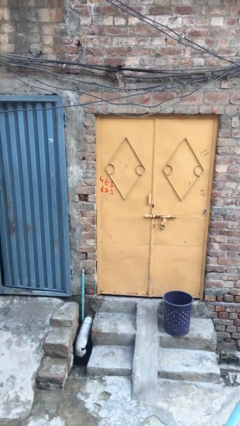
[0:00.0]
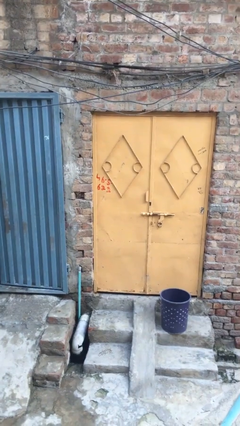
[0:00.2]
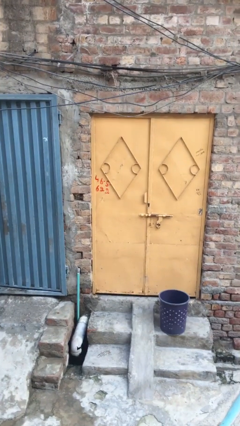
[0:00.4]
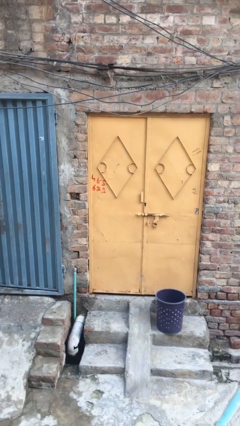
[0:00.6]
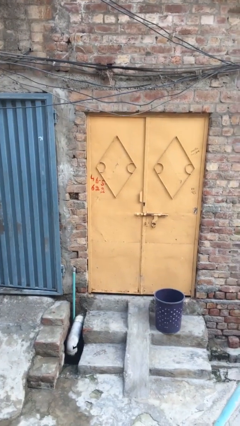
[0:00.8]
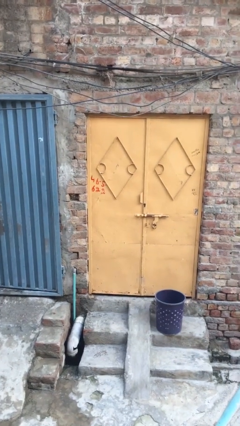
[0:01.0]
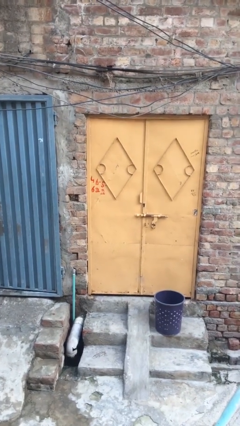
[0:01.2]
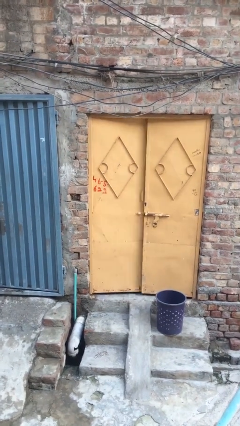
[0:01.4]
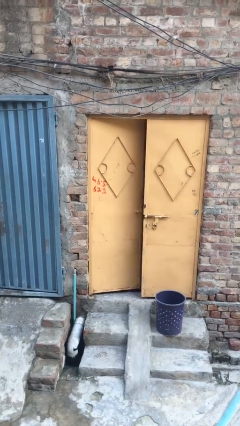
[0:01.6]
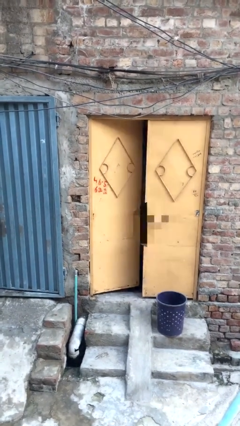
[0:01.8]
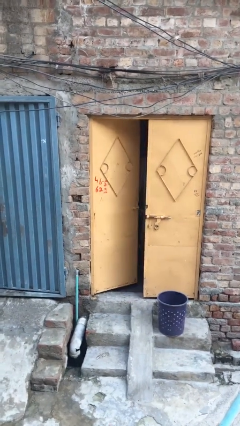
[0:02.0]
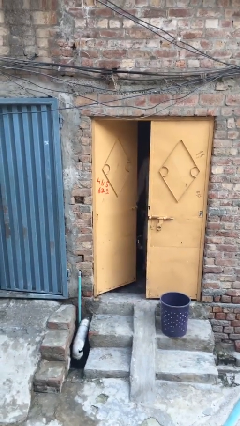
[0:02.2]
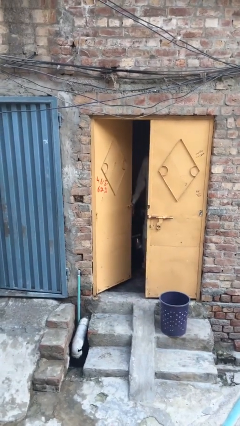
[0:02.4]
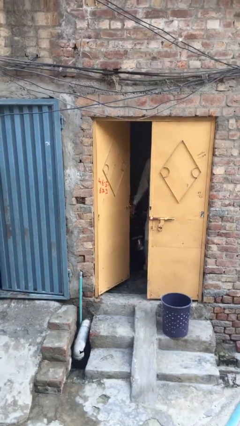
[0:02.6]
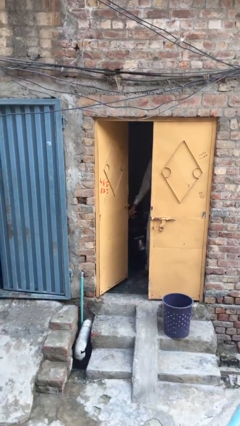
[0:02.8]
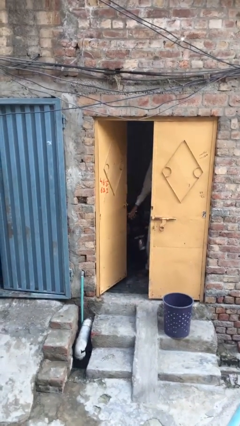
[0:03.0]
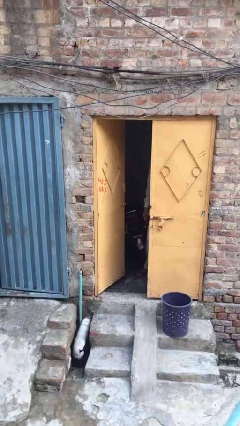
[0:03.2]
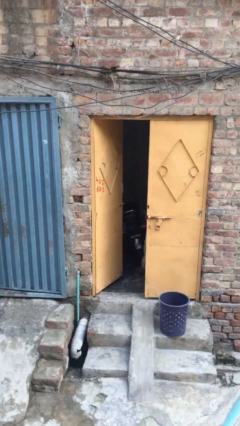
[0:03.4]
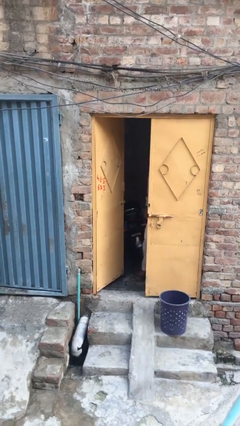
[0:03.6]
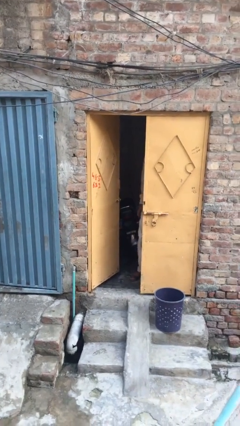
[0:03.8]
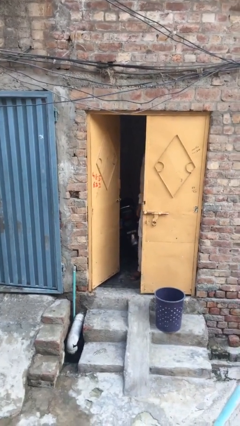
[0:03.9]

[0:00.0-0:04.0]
person opens facility door

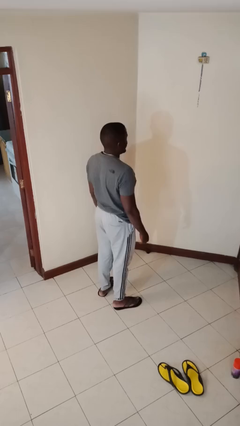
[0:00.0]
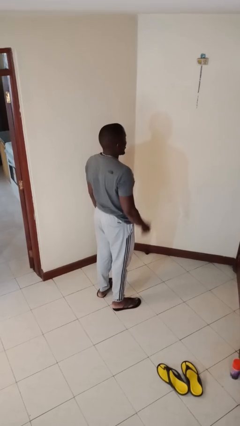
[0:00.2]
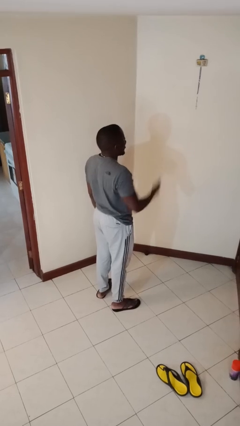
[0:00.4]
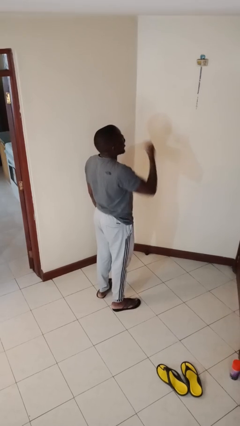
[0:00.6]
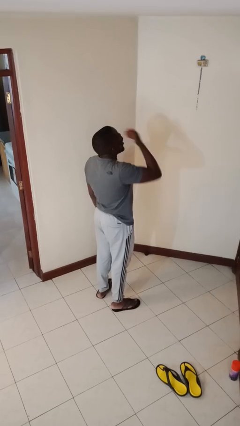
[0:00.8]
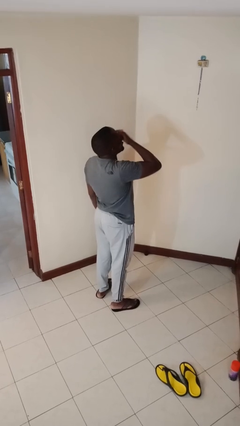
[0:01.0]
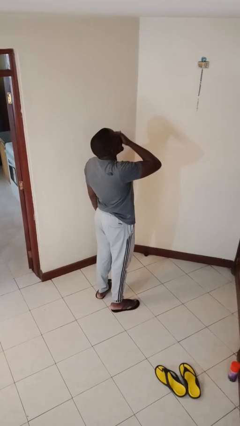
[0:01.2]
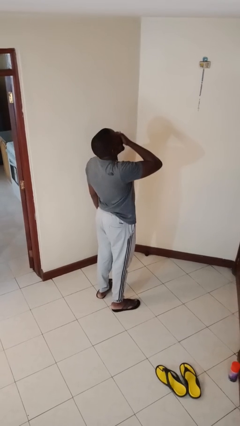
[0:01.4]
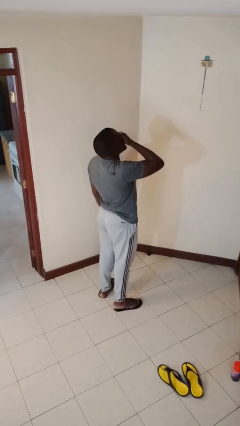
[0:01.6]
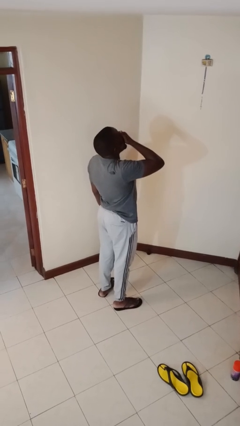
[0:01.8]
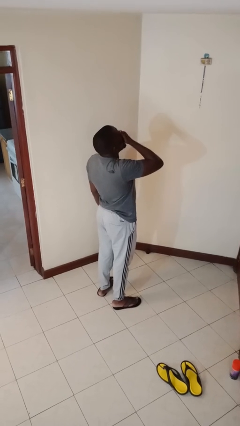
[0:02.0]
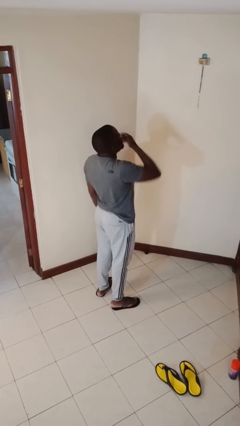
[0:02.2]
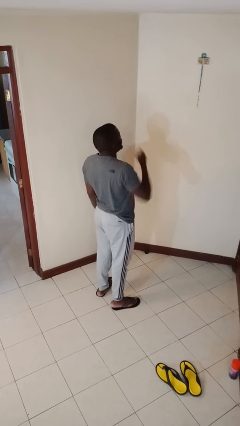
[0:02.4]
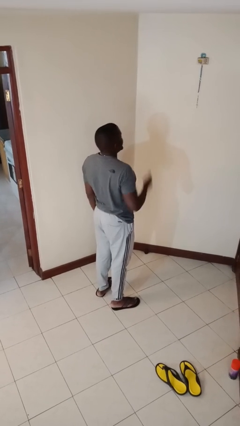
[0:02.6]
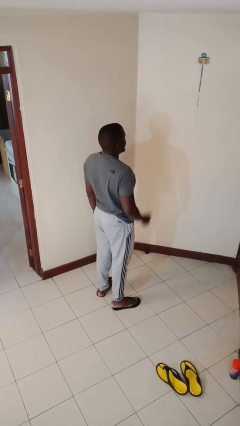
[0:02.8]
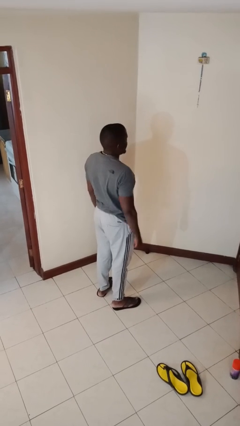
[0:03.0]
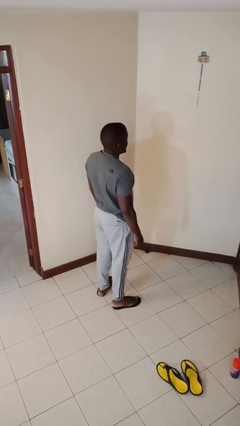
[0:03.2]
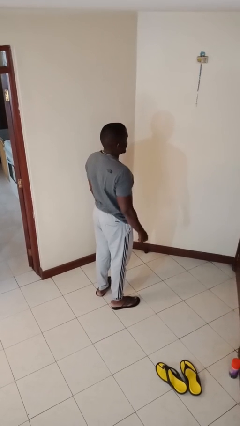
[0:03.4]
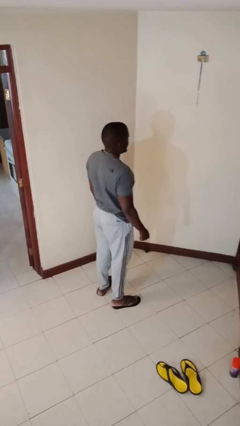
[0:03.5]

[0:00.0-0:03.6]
person yawns

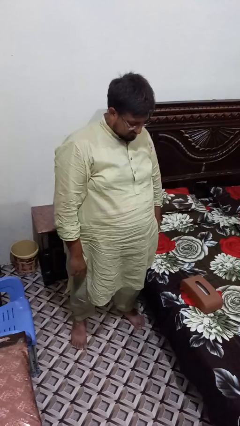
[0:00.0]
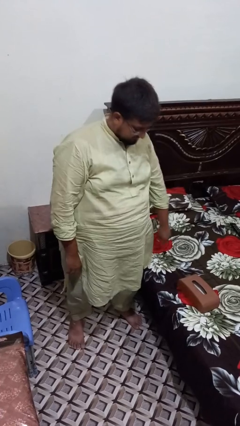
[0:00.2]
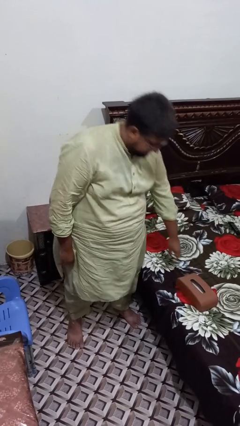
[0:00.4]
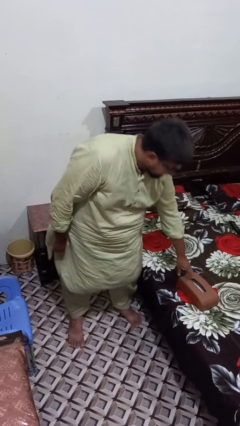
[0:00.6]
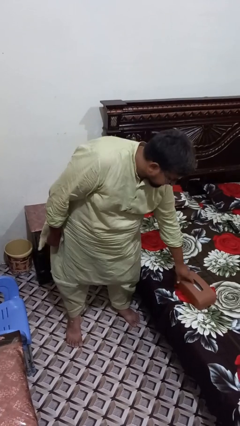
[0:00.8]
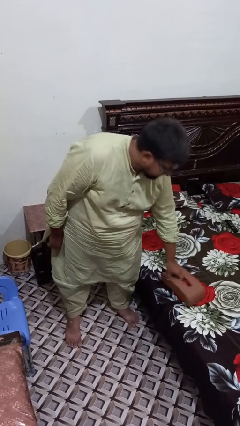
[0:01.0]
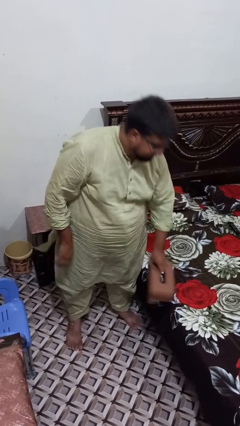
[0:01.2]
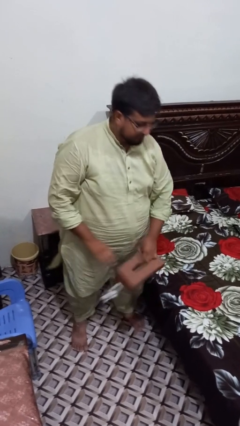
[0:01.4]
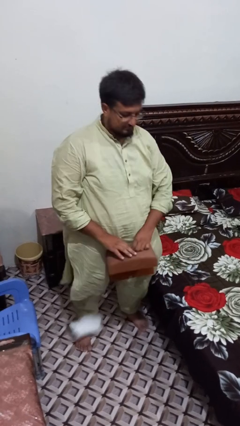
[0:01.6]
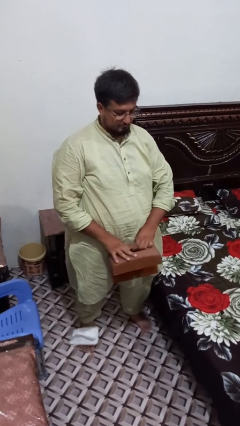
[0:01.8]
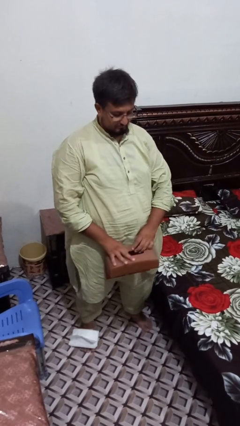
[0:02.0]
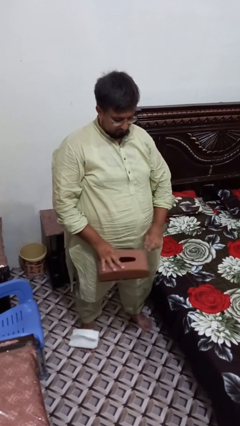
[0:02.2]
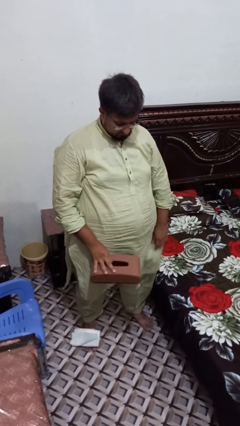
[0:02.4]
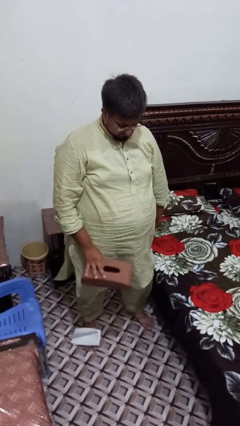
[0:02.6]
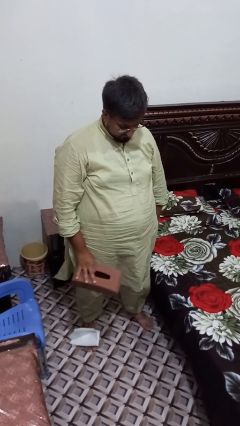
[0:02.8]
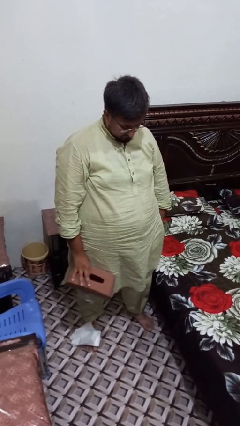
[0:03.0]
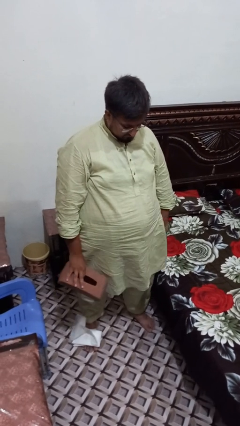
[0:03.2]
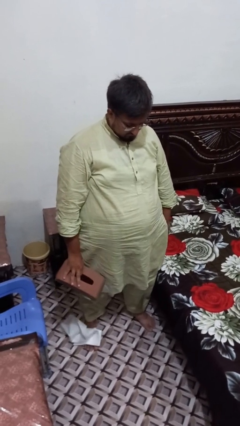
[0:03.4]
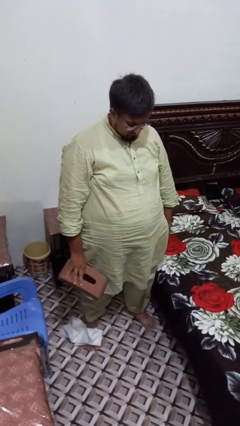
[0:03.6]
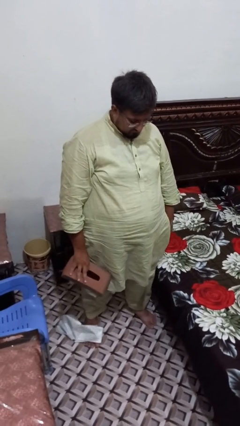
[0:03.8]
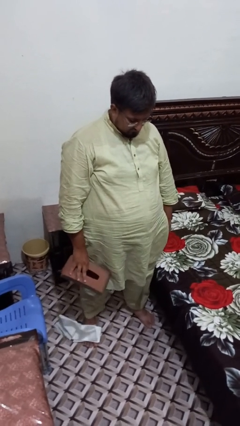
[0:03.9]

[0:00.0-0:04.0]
person picks up object from bed

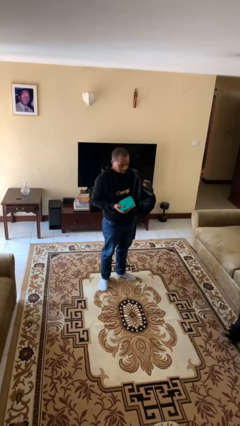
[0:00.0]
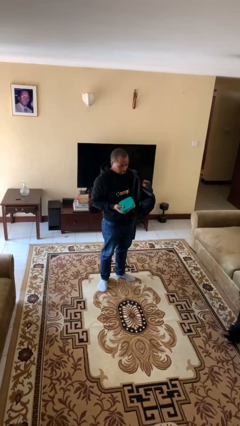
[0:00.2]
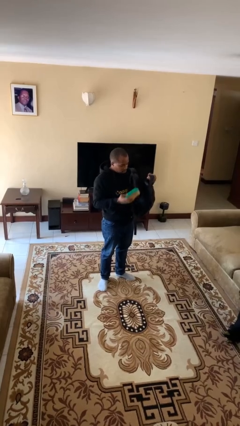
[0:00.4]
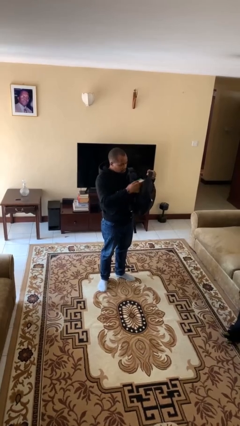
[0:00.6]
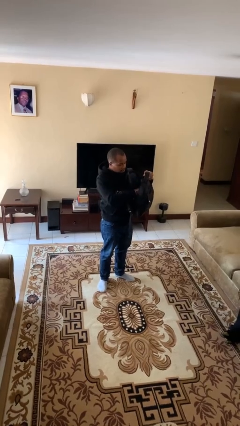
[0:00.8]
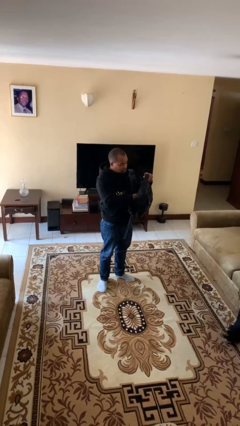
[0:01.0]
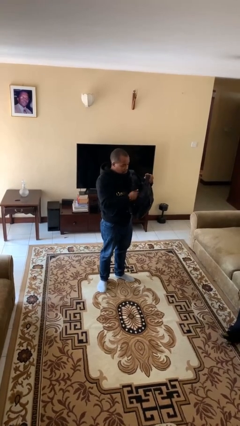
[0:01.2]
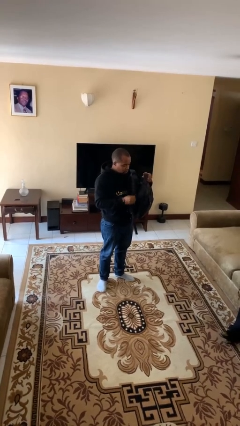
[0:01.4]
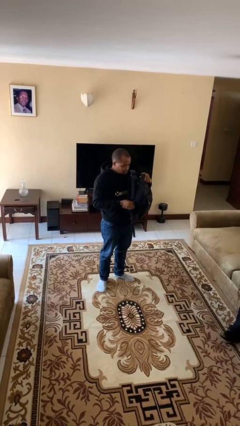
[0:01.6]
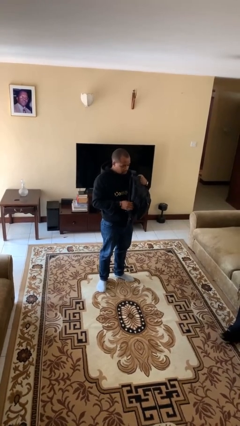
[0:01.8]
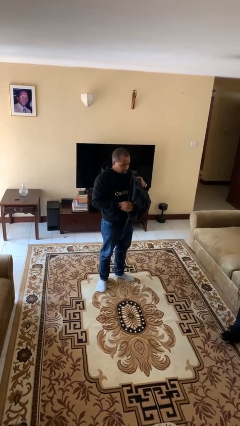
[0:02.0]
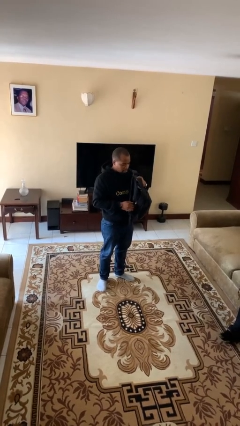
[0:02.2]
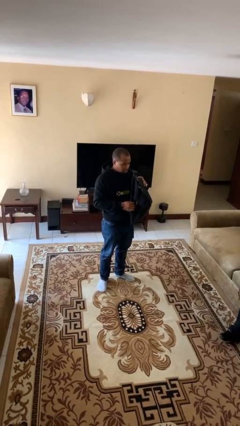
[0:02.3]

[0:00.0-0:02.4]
person puts object into backpack

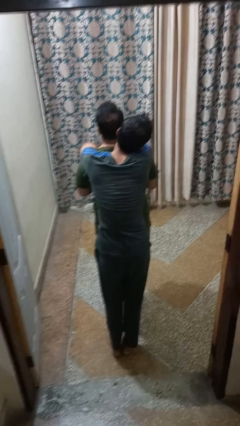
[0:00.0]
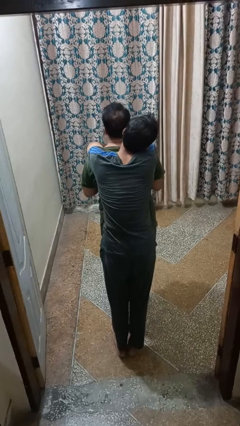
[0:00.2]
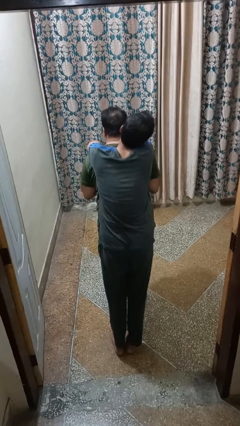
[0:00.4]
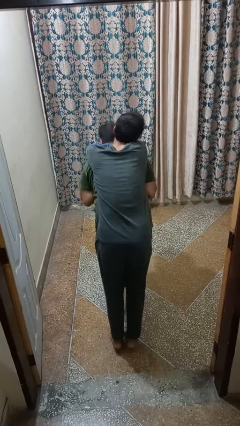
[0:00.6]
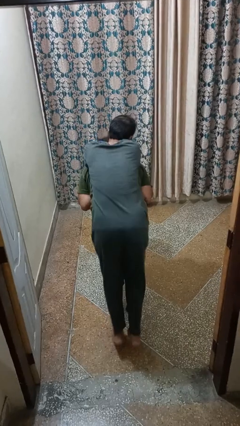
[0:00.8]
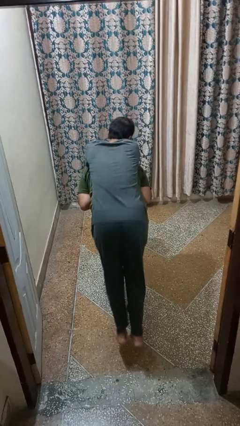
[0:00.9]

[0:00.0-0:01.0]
person carries person on back

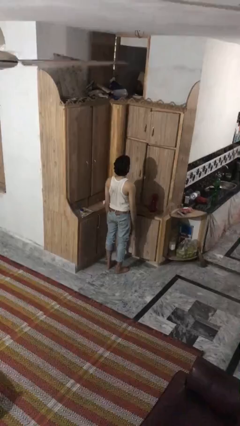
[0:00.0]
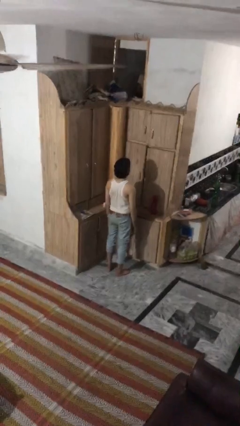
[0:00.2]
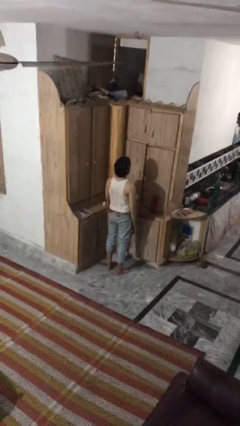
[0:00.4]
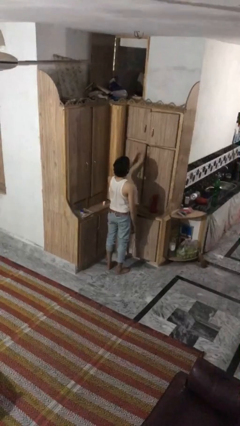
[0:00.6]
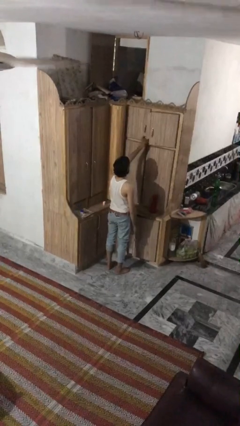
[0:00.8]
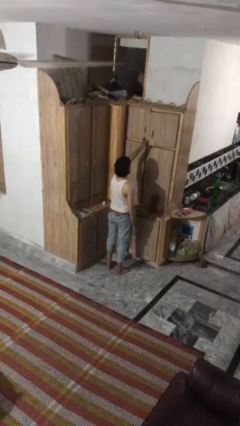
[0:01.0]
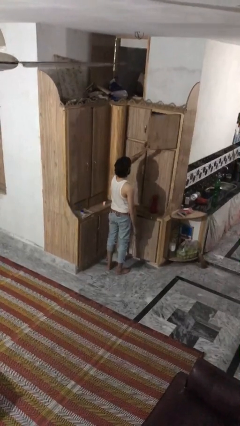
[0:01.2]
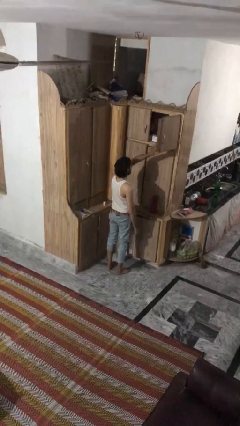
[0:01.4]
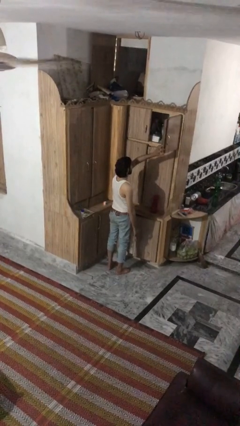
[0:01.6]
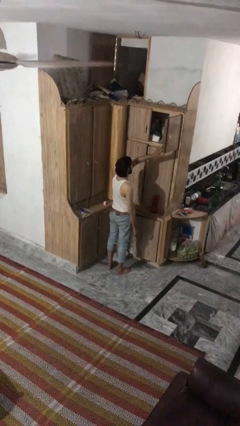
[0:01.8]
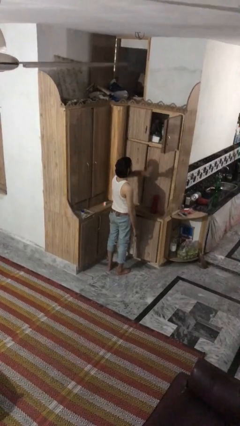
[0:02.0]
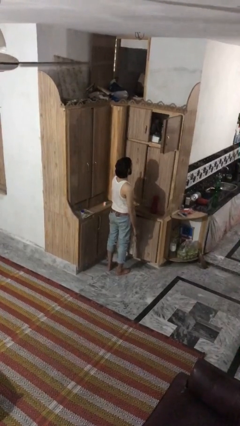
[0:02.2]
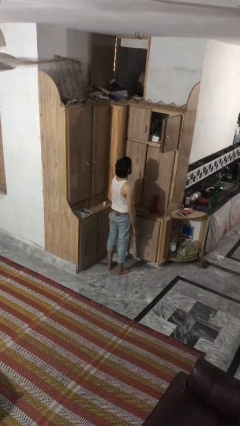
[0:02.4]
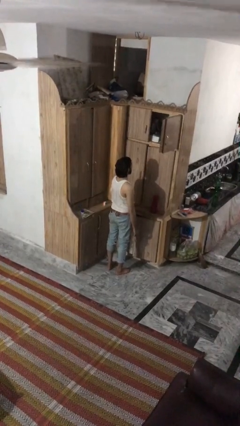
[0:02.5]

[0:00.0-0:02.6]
person opens cabinet

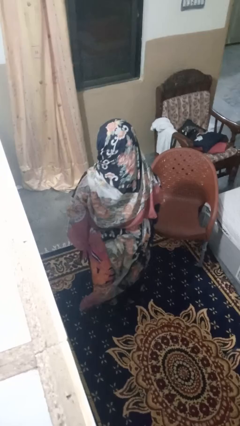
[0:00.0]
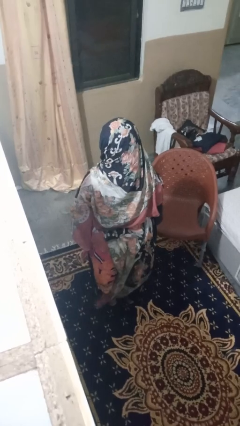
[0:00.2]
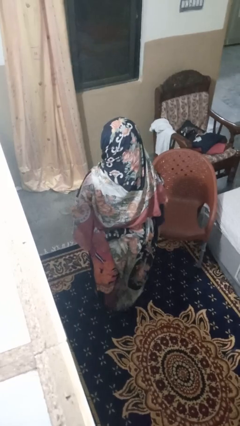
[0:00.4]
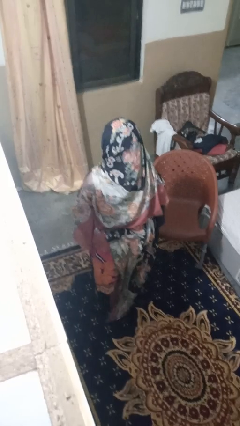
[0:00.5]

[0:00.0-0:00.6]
person lies down on floor
